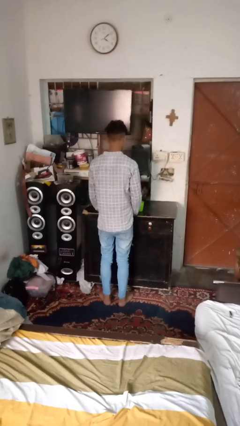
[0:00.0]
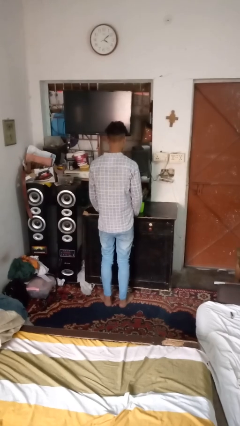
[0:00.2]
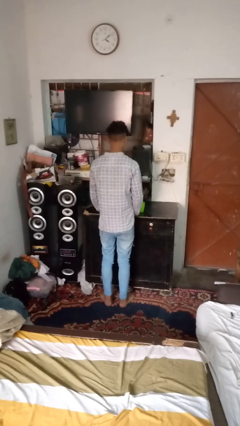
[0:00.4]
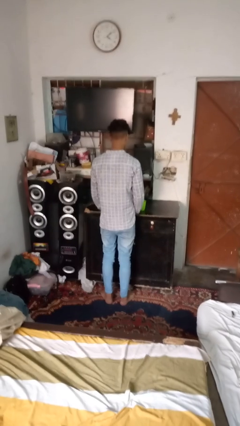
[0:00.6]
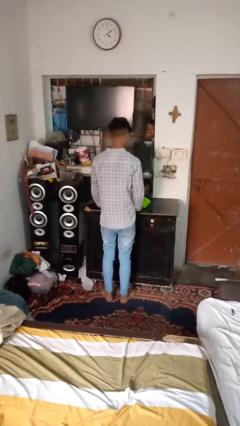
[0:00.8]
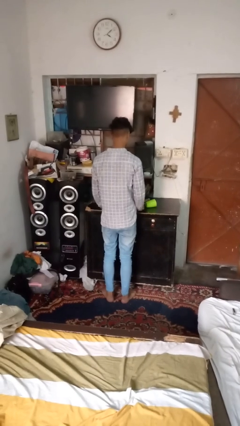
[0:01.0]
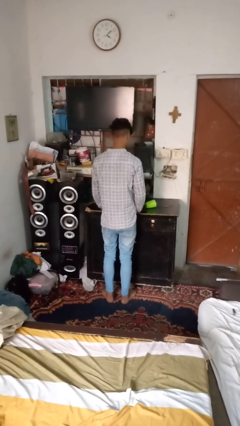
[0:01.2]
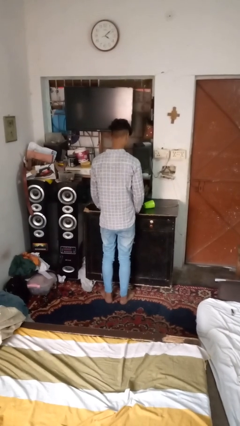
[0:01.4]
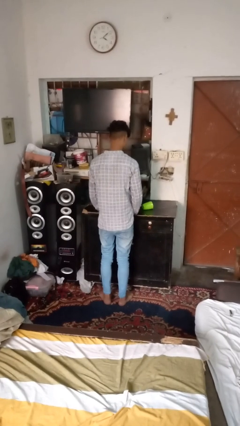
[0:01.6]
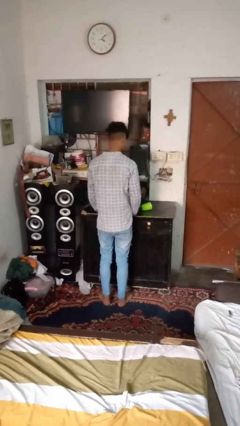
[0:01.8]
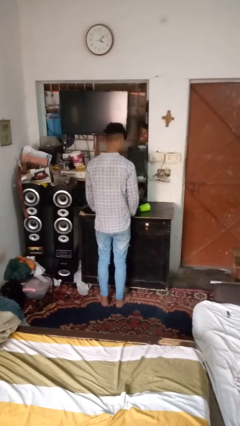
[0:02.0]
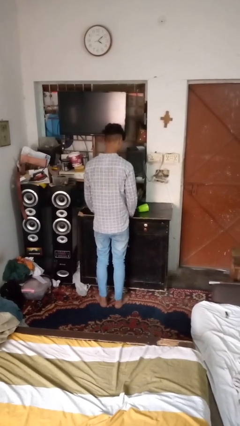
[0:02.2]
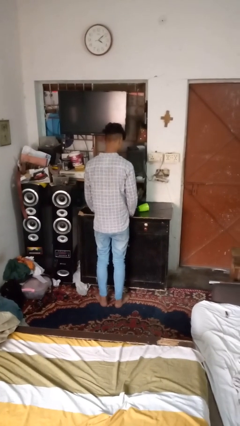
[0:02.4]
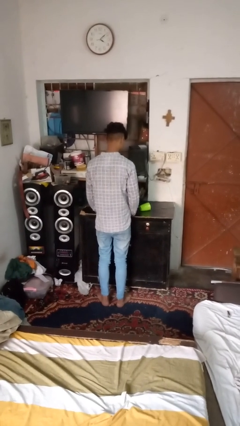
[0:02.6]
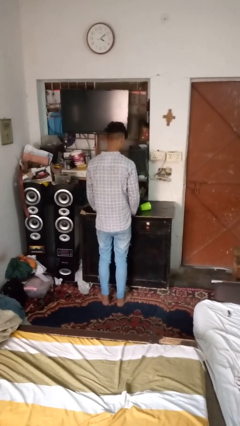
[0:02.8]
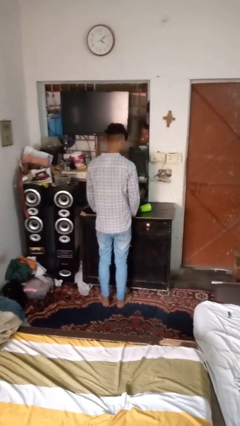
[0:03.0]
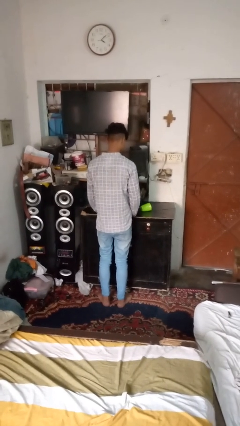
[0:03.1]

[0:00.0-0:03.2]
person spills on table

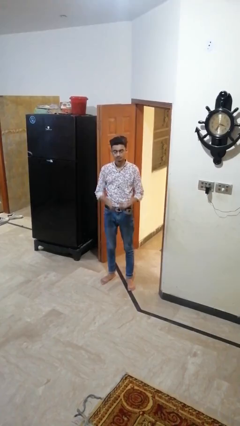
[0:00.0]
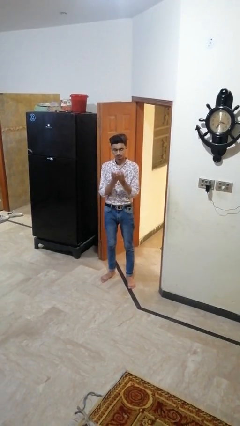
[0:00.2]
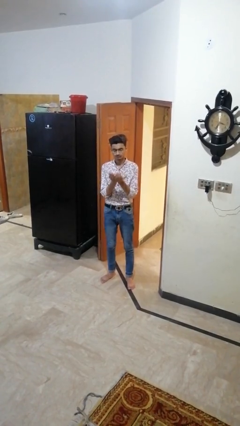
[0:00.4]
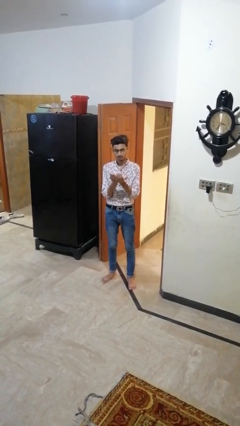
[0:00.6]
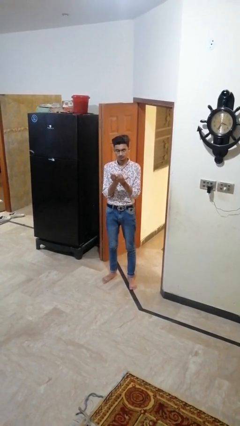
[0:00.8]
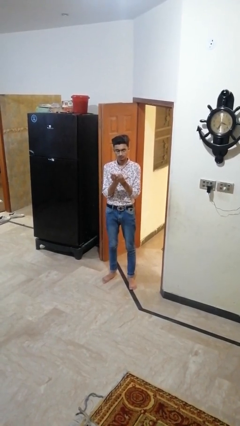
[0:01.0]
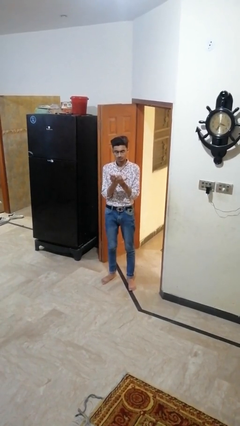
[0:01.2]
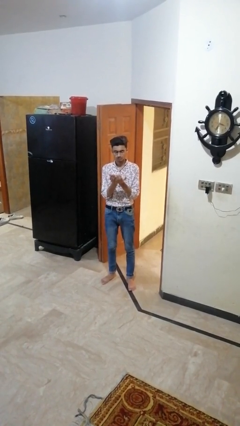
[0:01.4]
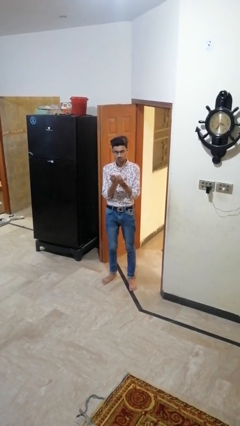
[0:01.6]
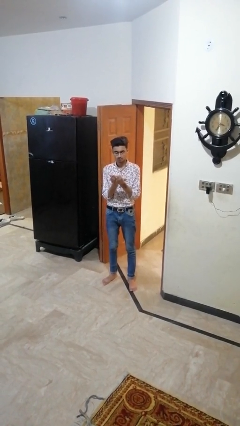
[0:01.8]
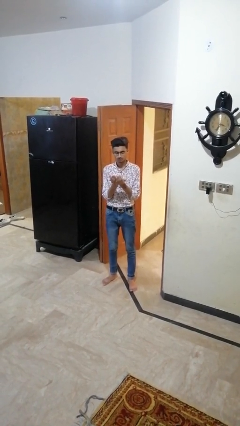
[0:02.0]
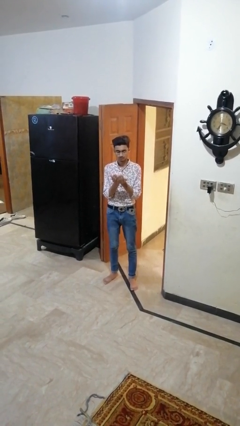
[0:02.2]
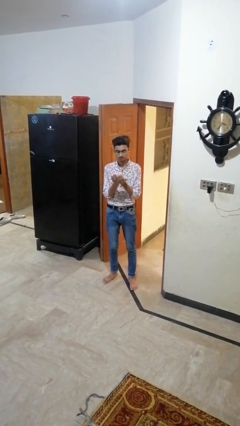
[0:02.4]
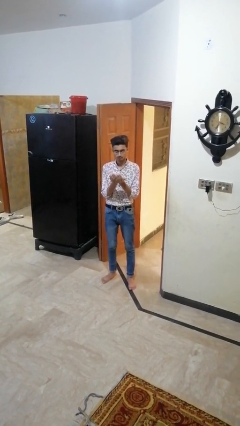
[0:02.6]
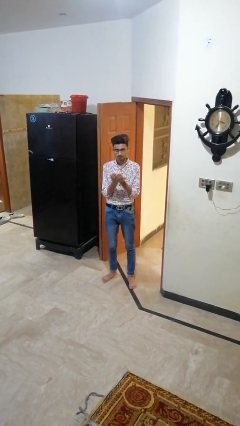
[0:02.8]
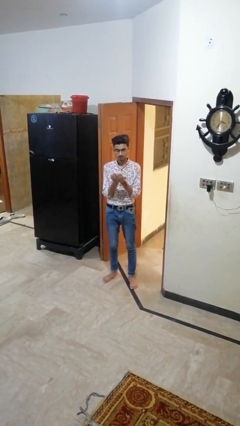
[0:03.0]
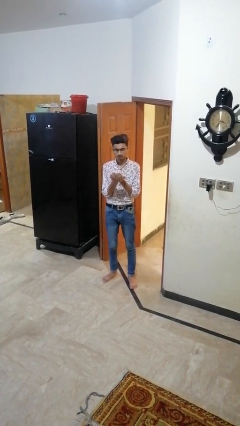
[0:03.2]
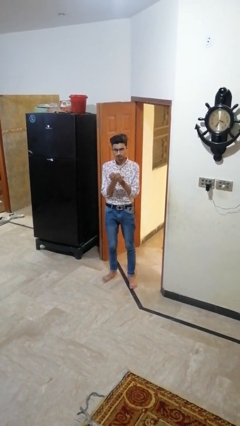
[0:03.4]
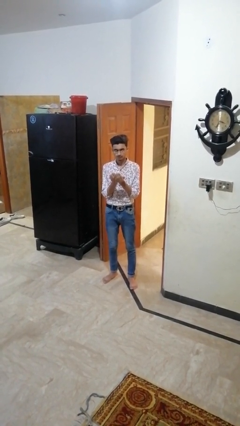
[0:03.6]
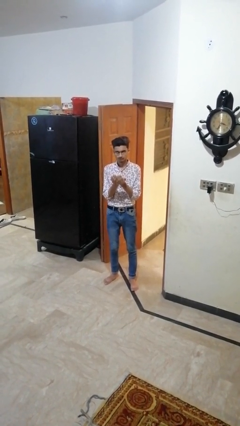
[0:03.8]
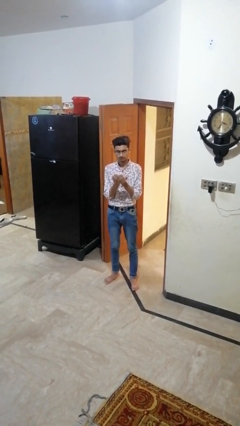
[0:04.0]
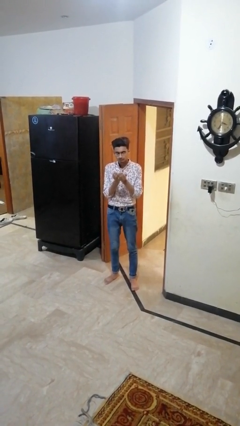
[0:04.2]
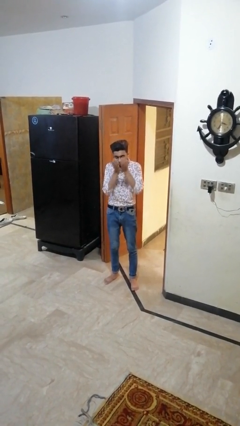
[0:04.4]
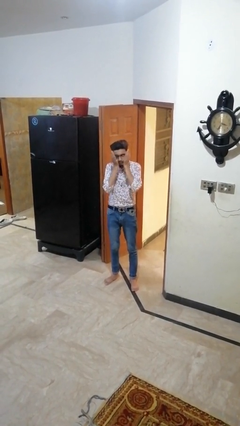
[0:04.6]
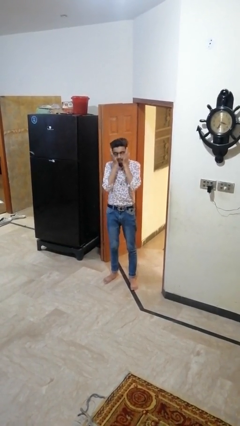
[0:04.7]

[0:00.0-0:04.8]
person prays

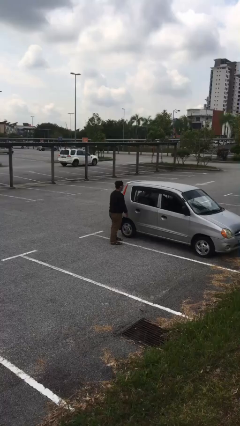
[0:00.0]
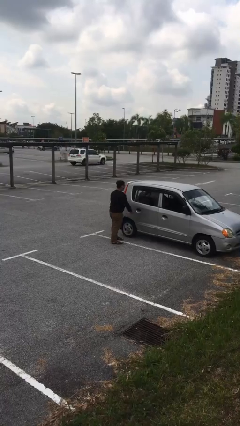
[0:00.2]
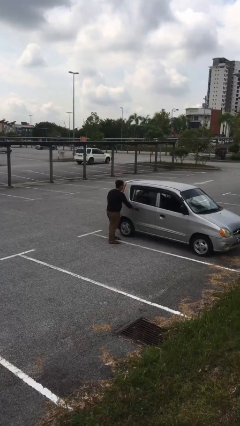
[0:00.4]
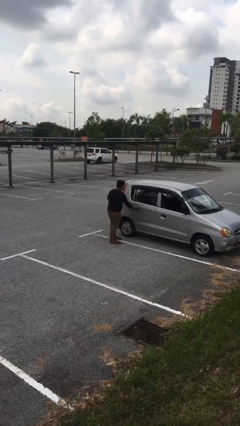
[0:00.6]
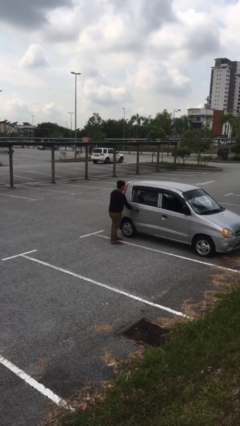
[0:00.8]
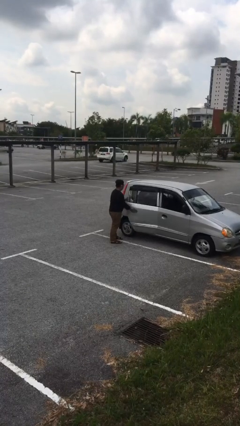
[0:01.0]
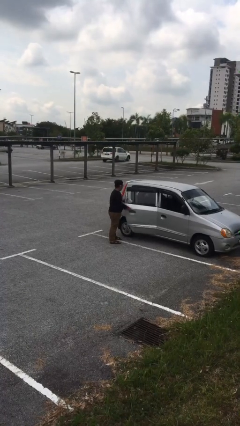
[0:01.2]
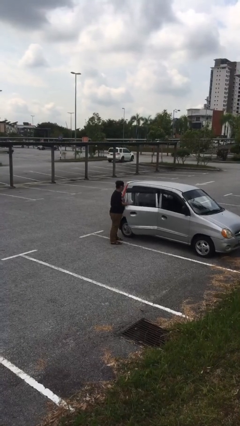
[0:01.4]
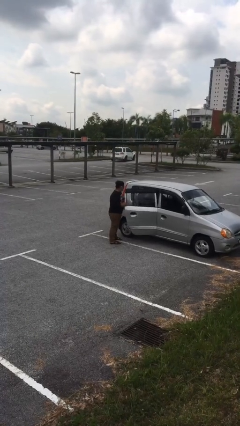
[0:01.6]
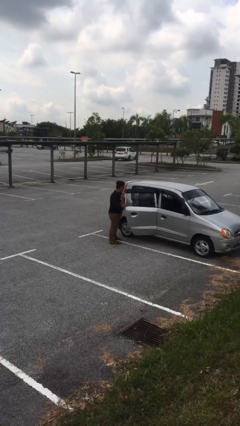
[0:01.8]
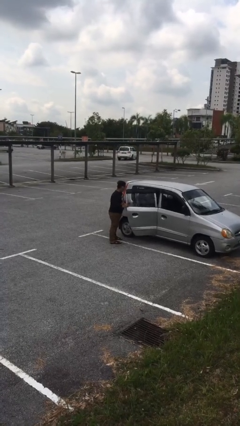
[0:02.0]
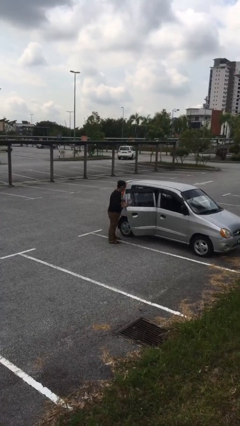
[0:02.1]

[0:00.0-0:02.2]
person opens car door

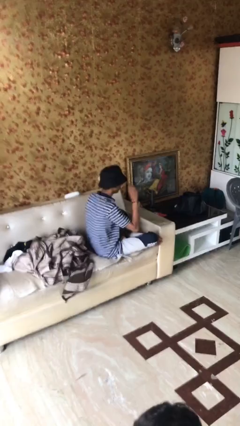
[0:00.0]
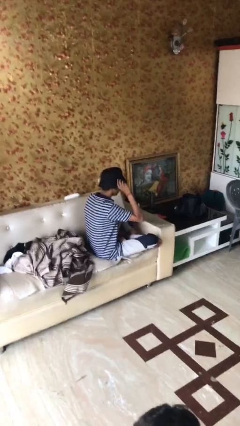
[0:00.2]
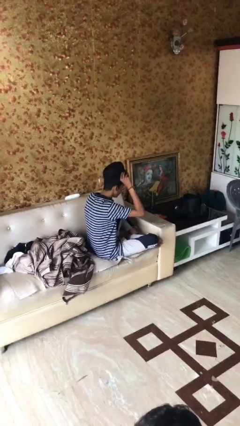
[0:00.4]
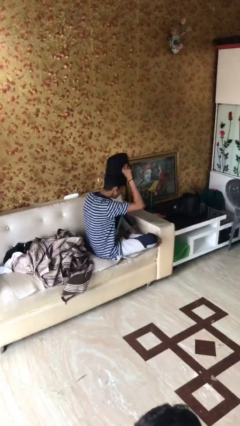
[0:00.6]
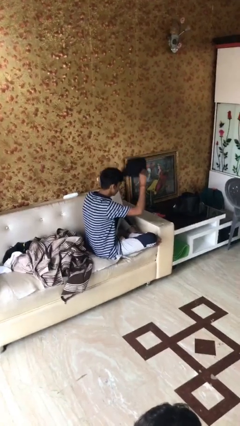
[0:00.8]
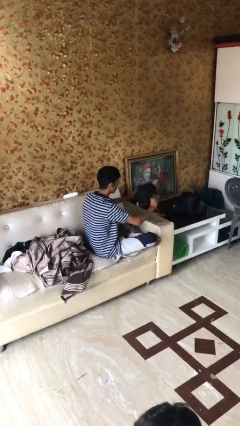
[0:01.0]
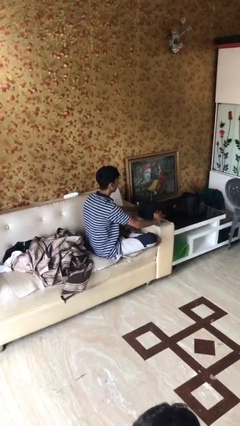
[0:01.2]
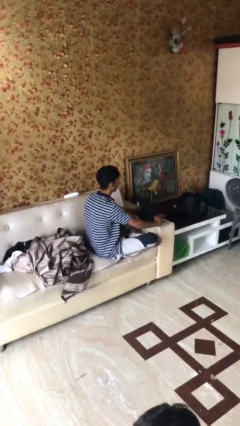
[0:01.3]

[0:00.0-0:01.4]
person takes off hat

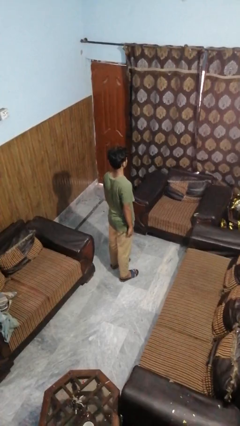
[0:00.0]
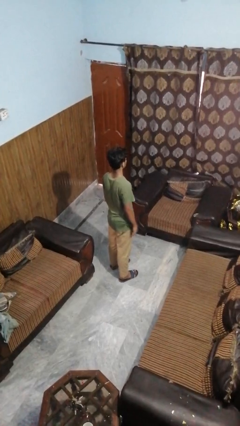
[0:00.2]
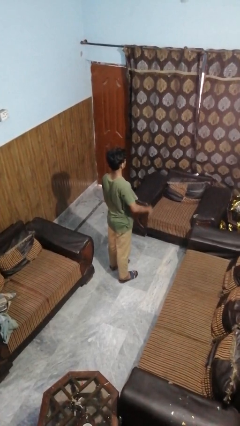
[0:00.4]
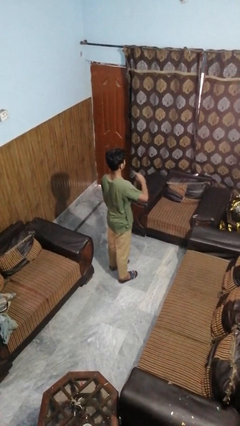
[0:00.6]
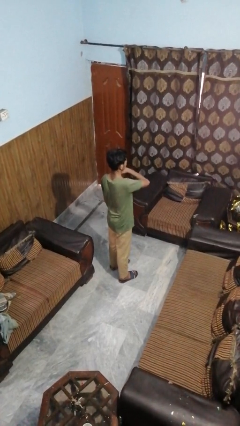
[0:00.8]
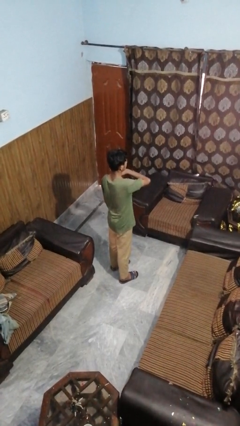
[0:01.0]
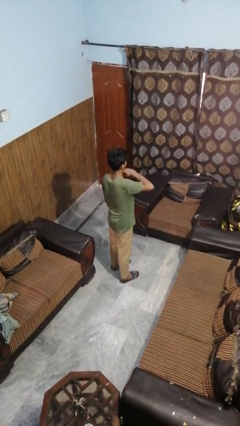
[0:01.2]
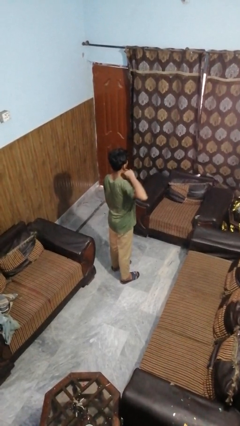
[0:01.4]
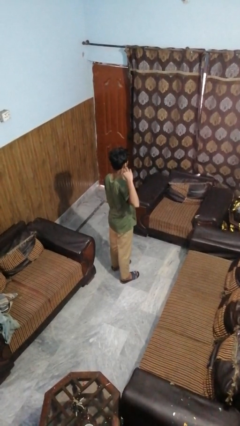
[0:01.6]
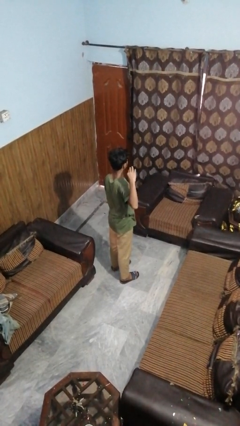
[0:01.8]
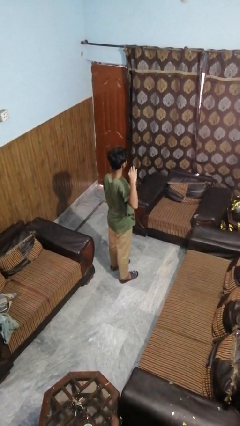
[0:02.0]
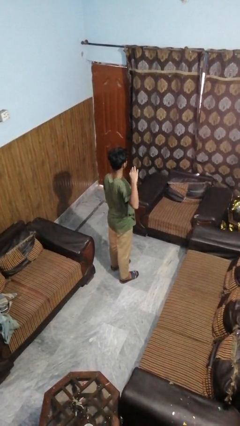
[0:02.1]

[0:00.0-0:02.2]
person gestures cut

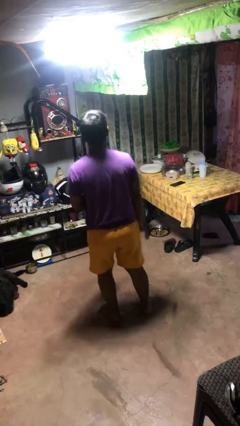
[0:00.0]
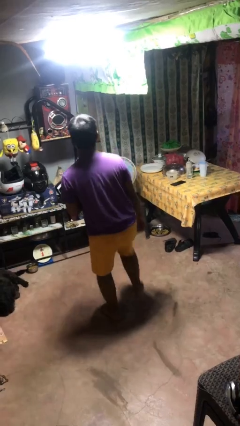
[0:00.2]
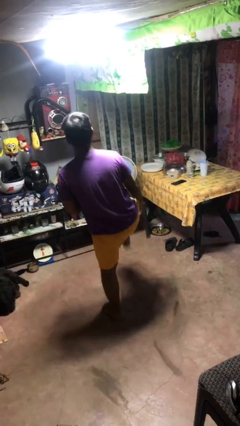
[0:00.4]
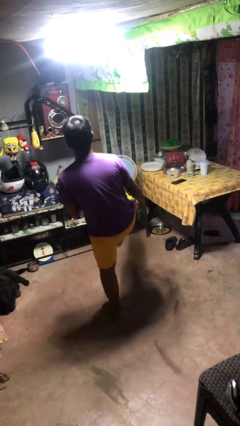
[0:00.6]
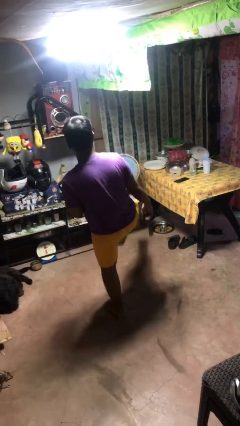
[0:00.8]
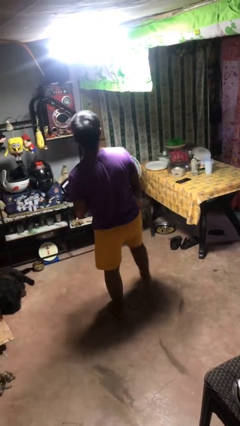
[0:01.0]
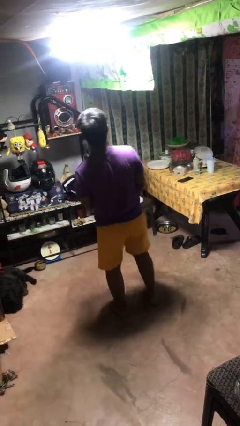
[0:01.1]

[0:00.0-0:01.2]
person karate kicks

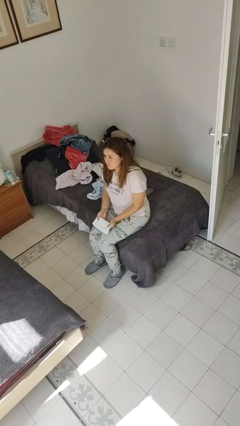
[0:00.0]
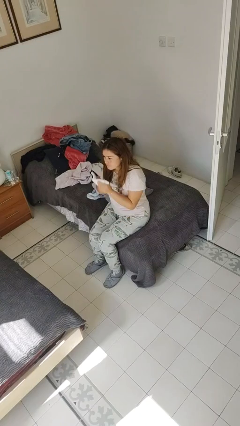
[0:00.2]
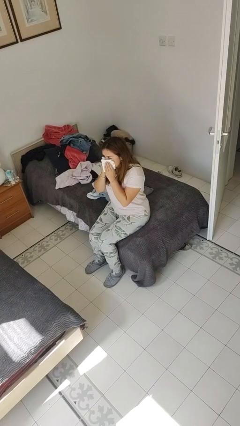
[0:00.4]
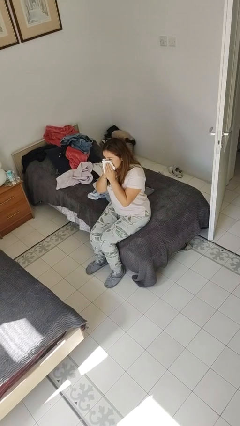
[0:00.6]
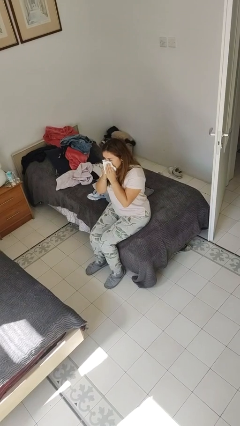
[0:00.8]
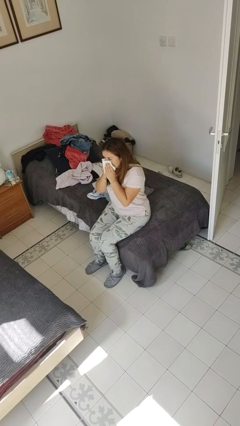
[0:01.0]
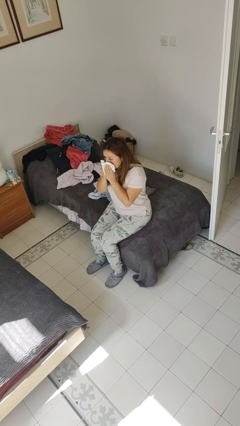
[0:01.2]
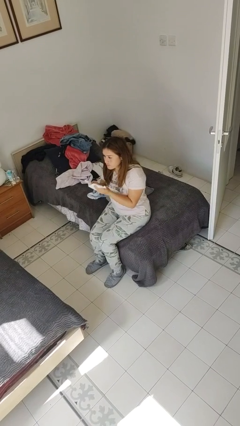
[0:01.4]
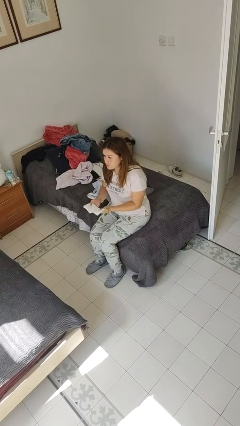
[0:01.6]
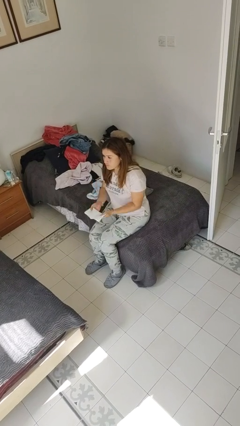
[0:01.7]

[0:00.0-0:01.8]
person blows nose

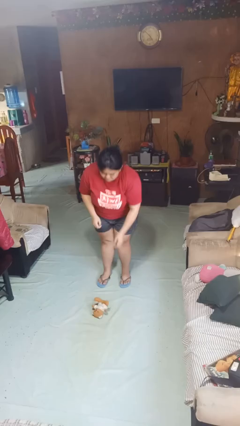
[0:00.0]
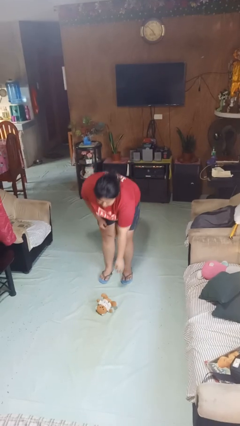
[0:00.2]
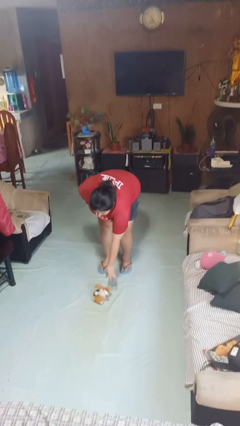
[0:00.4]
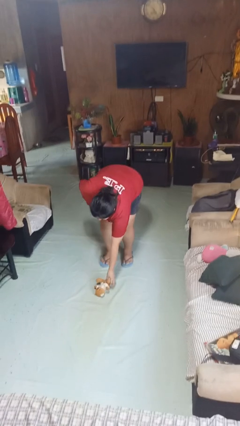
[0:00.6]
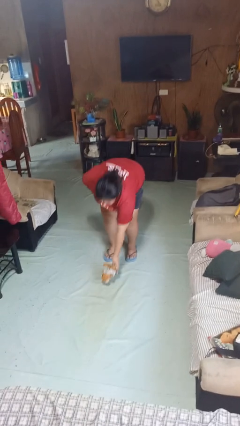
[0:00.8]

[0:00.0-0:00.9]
person picks up object from floor
